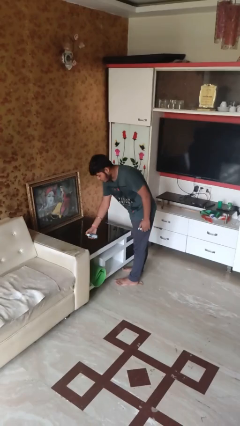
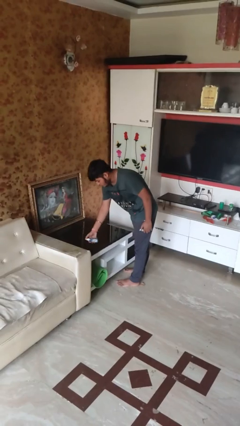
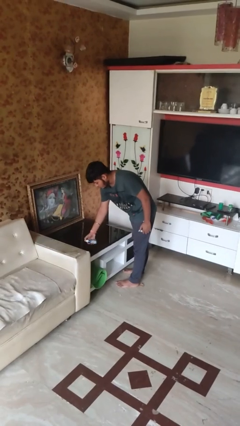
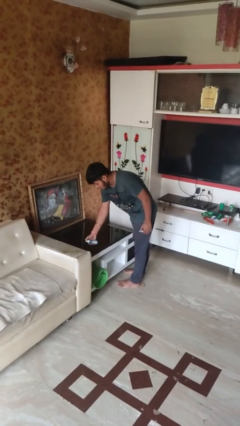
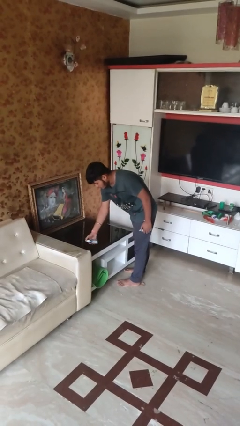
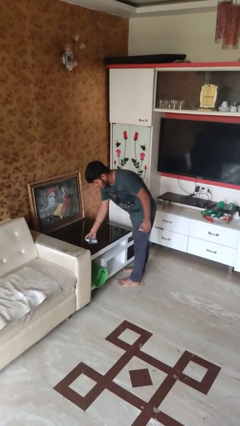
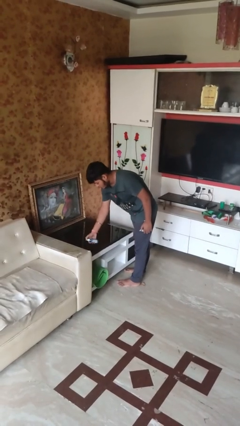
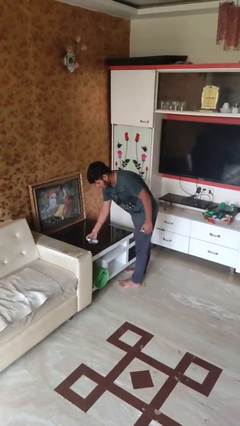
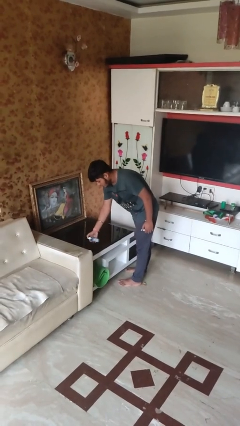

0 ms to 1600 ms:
person sprays from bottle

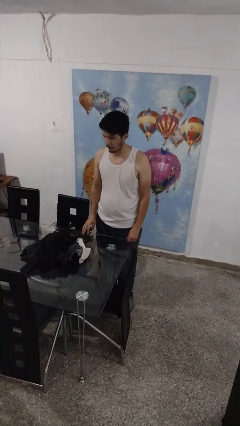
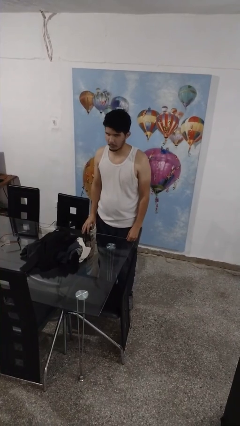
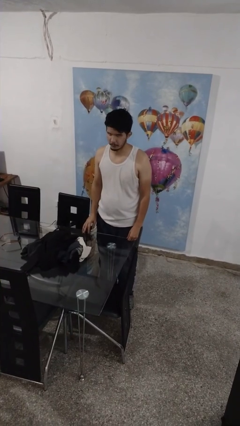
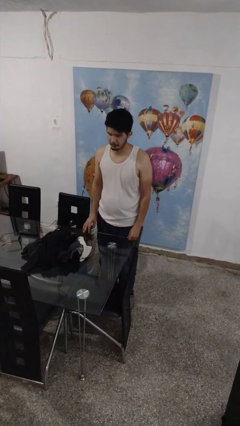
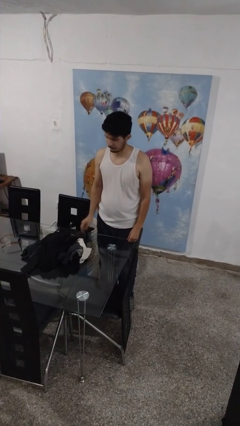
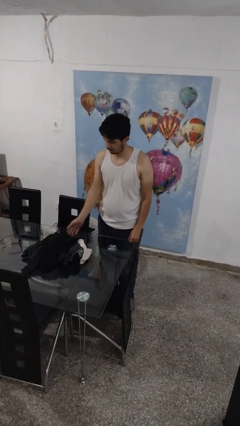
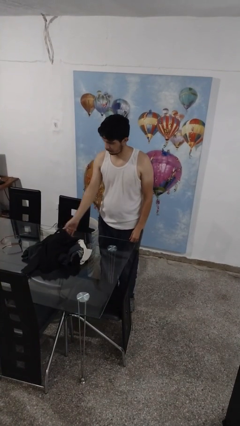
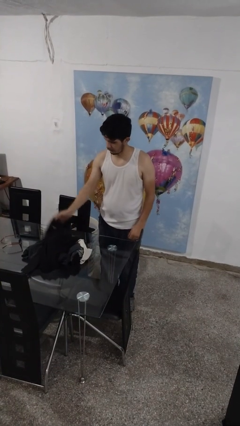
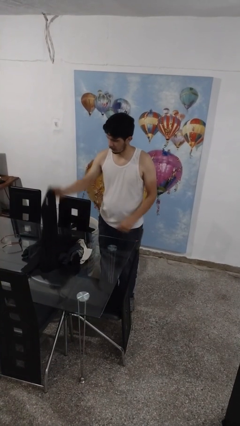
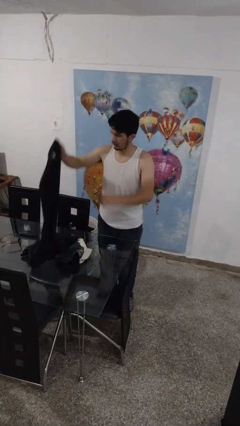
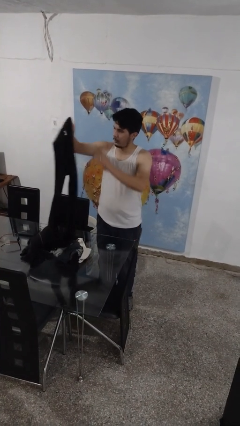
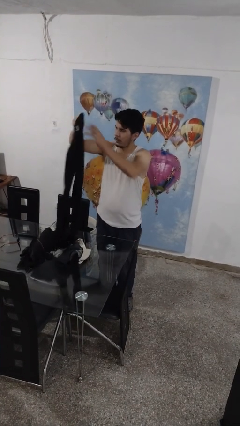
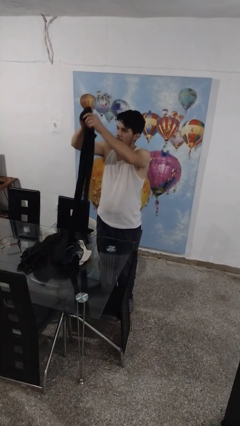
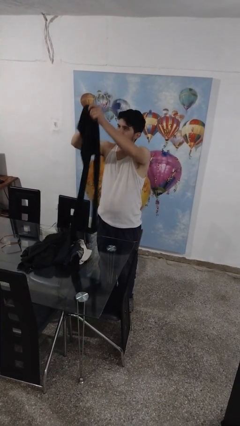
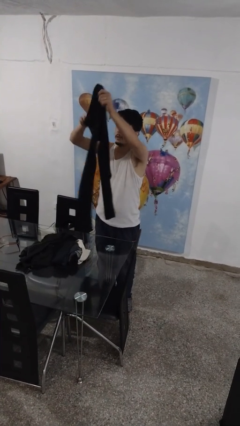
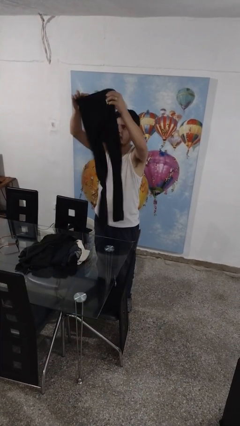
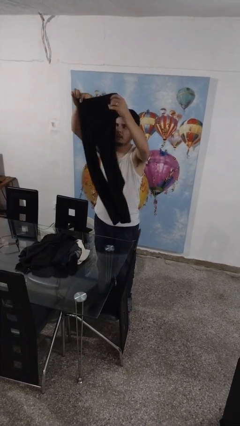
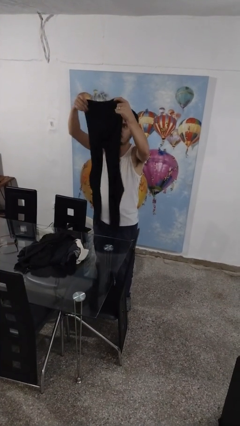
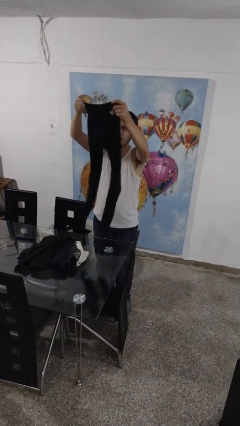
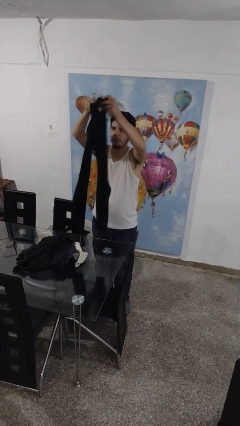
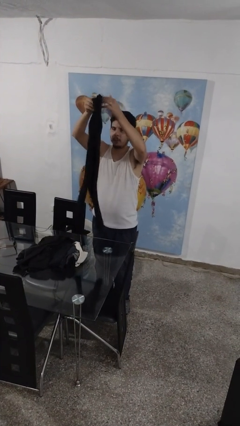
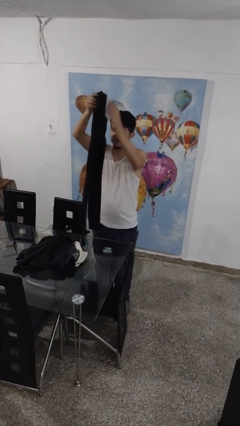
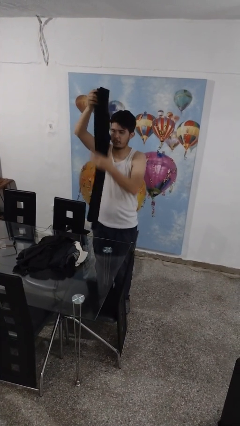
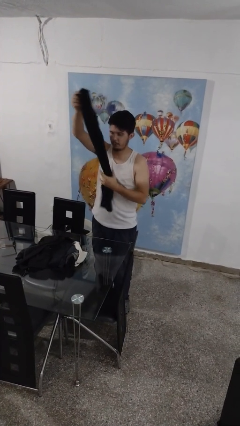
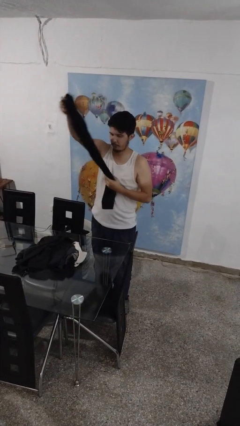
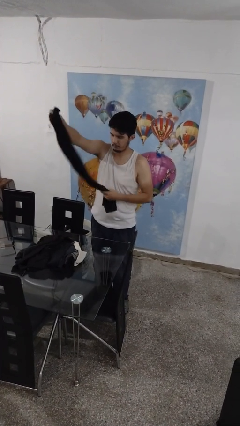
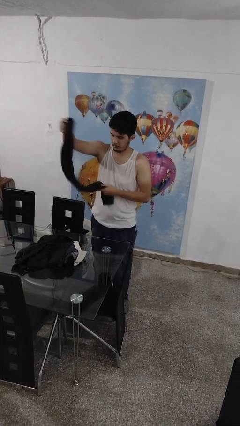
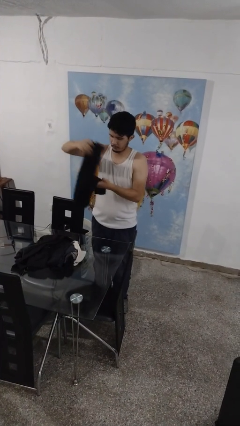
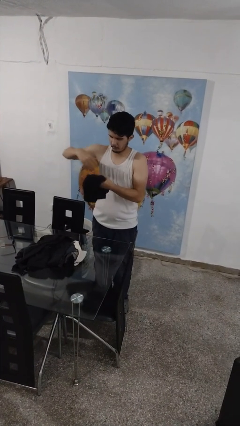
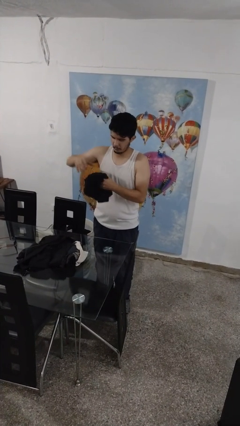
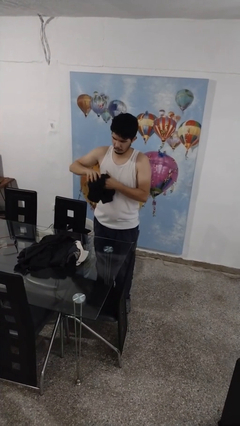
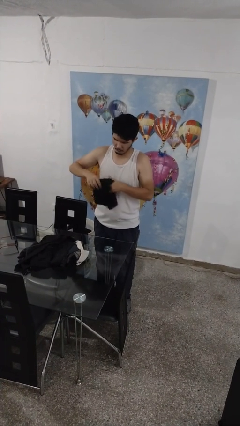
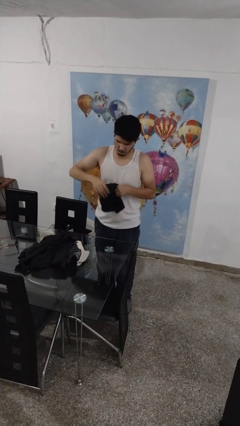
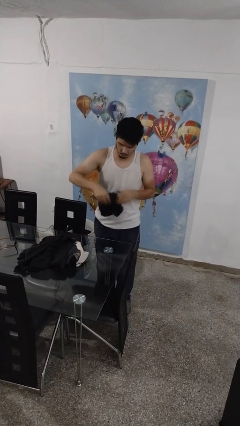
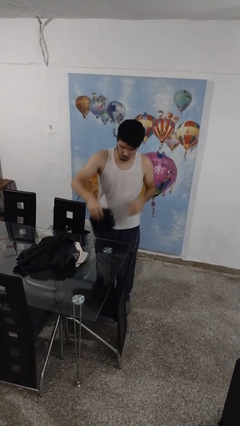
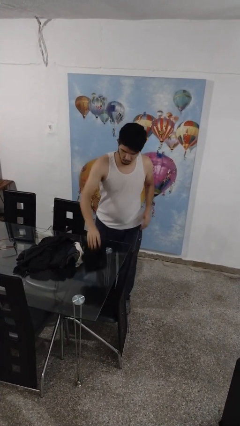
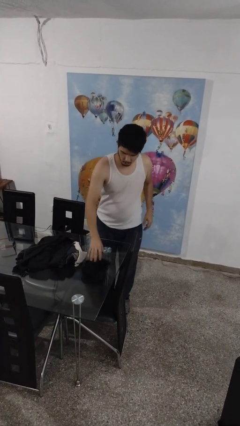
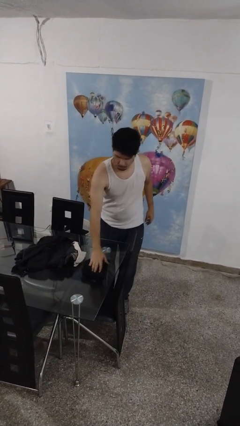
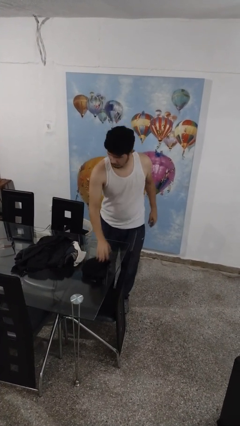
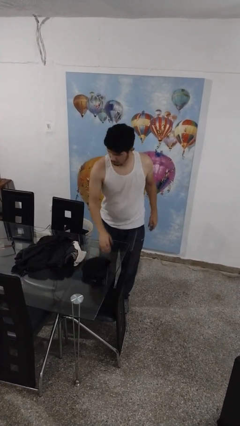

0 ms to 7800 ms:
person folds pants

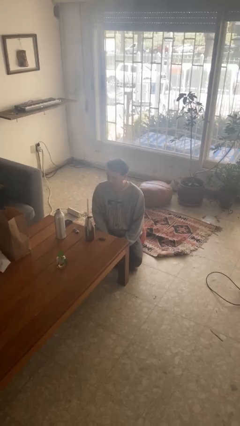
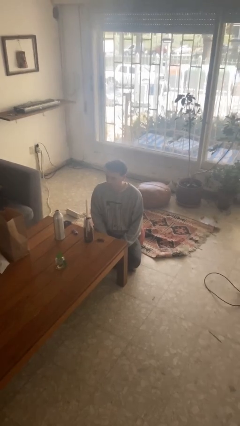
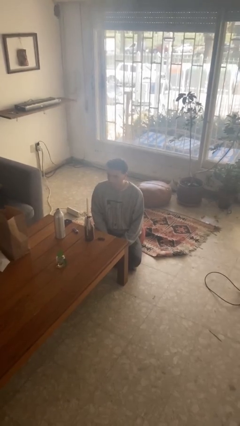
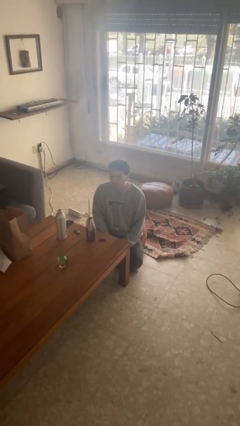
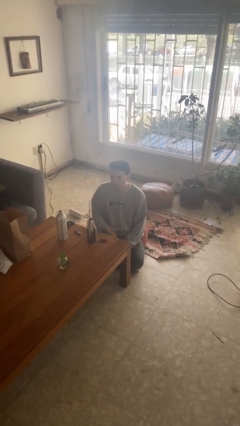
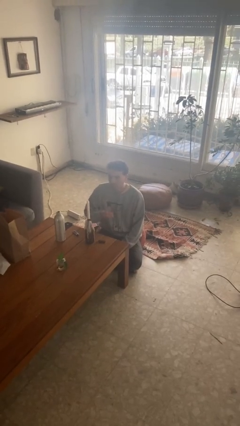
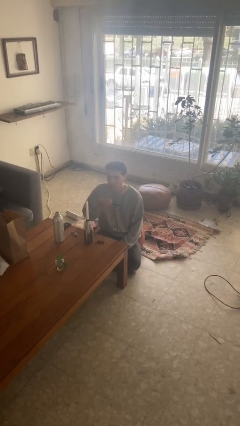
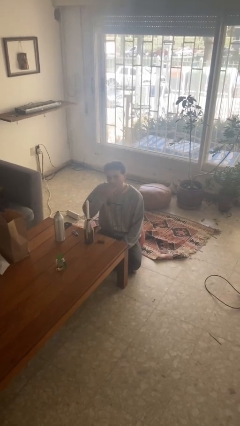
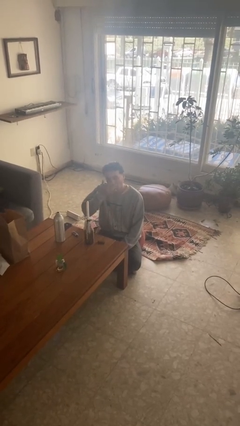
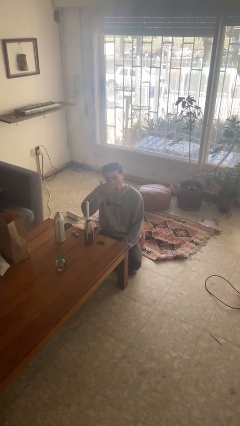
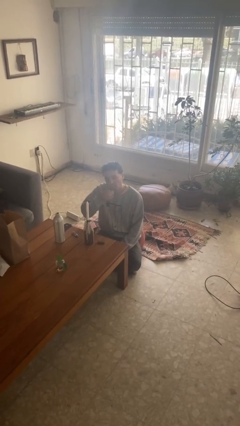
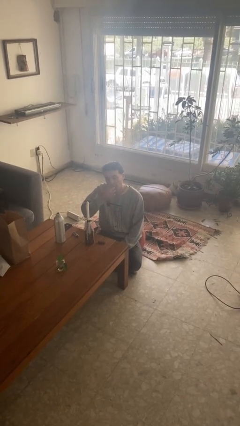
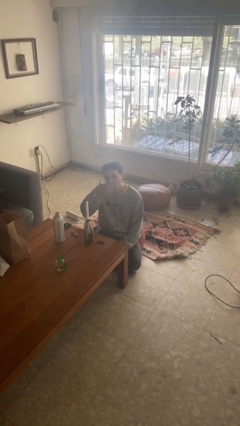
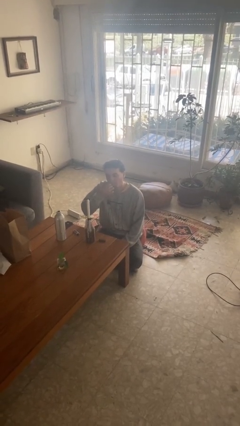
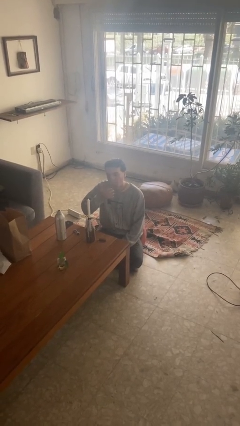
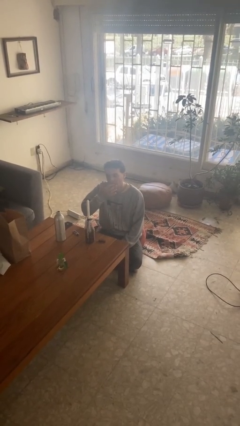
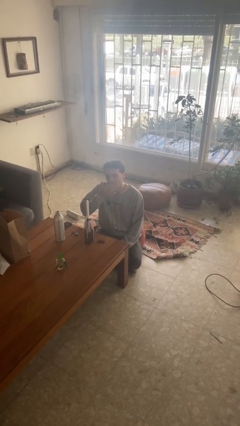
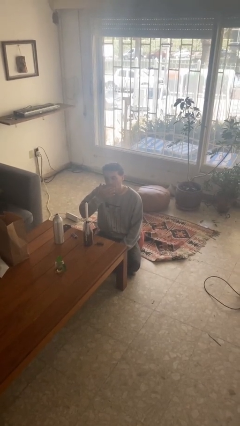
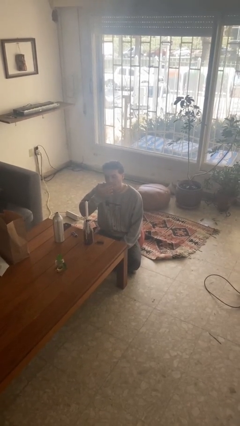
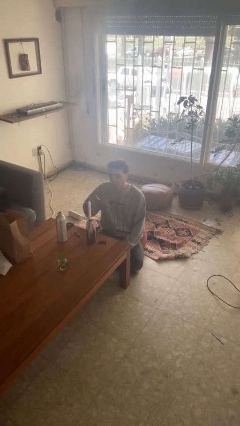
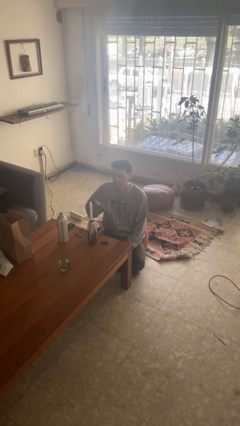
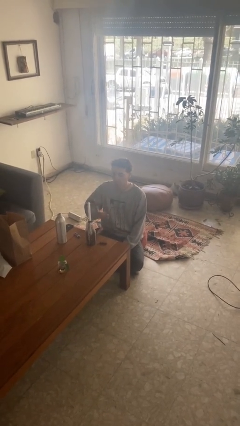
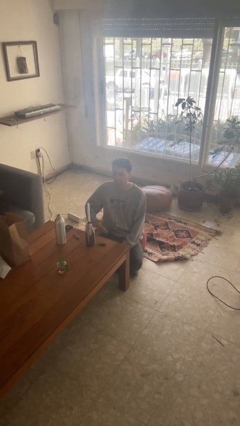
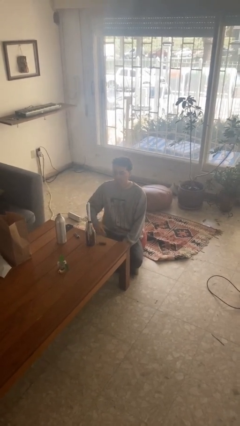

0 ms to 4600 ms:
person licks fingers

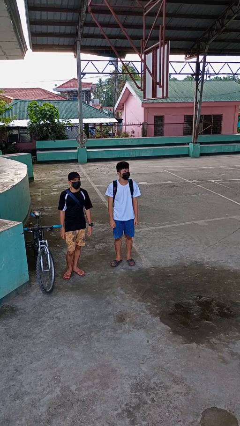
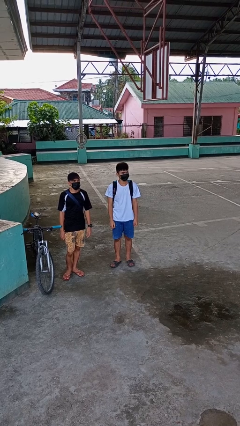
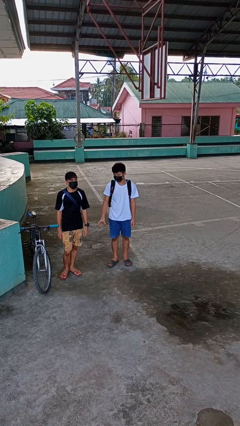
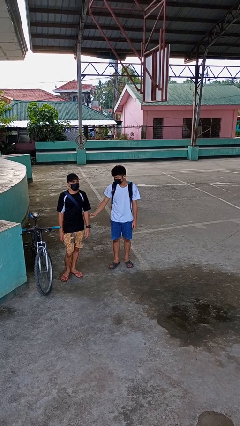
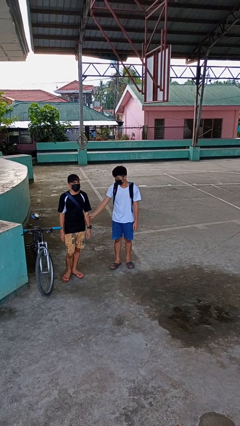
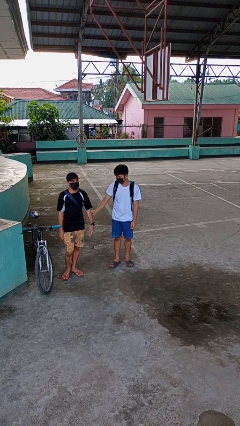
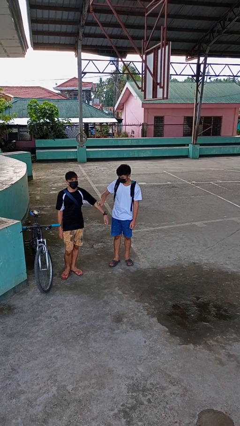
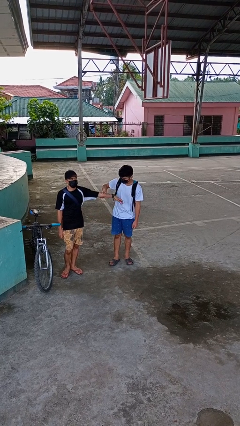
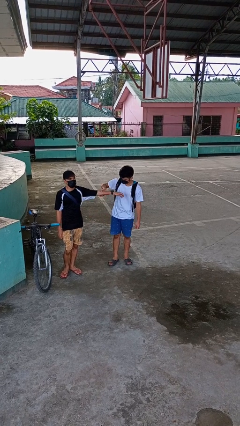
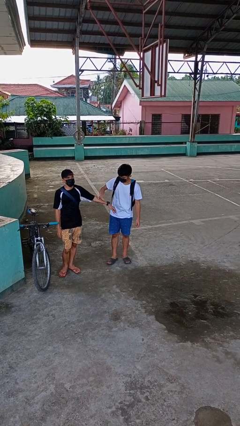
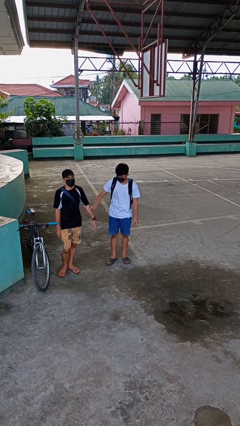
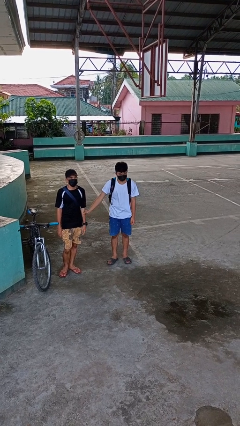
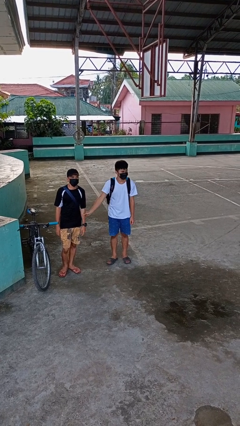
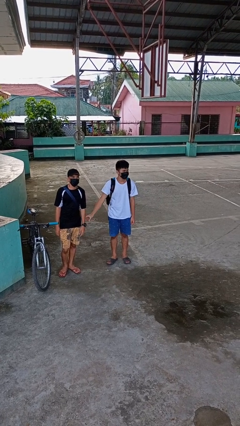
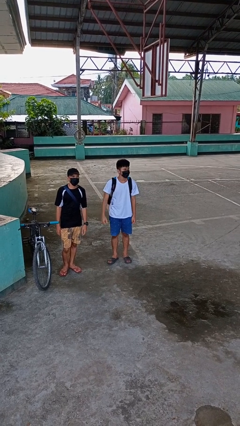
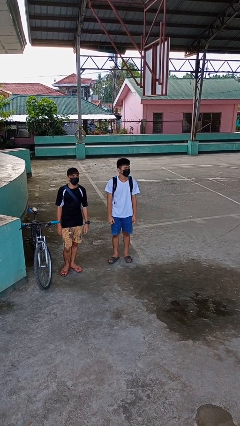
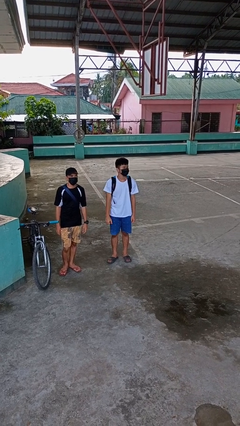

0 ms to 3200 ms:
person grabs person by forearm

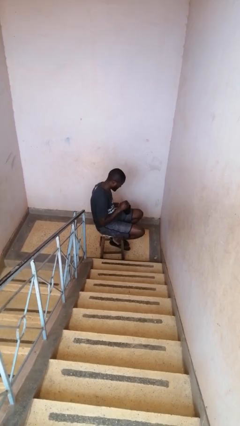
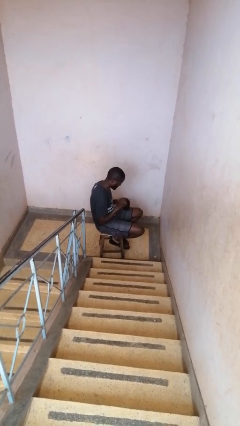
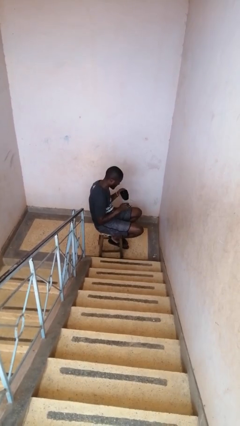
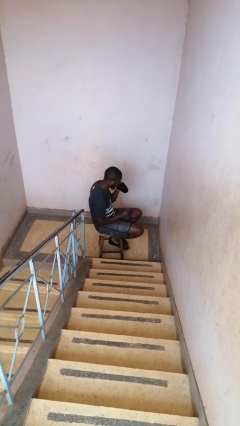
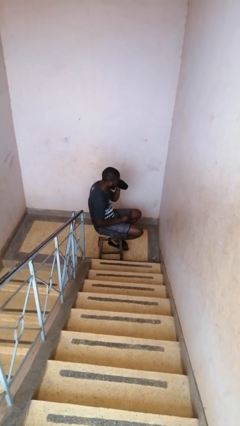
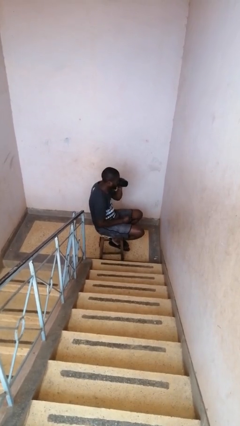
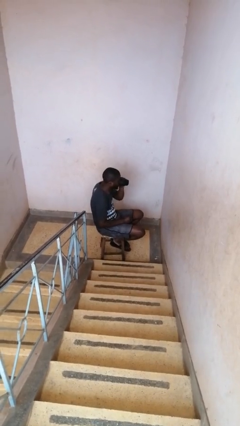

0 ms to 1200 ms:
person stirs mug
